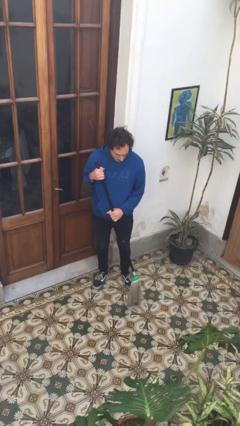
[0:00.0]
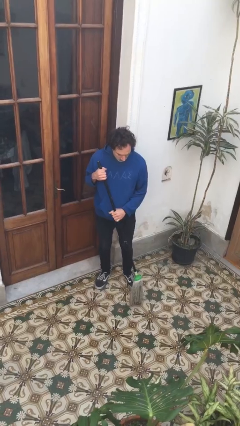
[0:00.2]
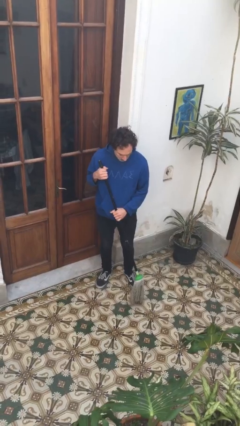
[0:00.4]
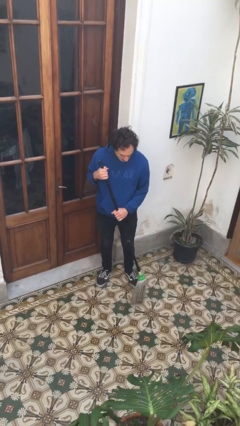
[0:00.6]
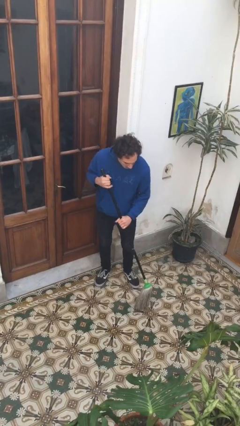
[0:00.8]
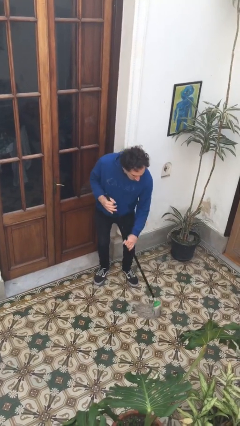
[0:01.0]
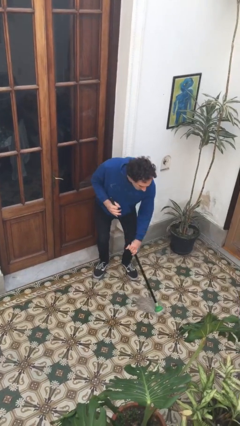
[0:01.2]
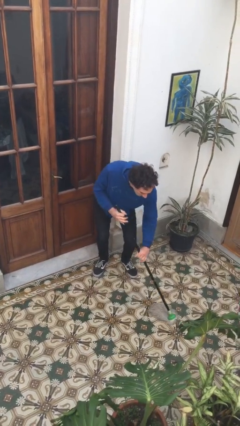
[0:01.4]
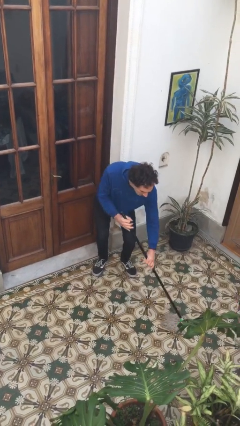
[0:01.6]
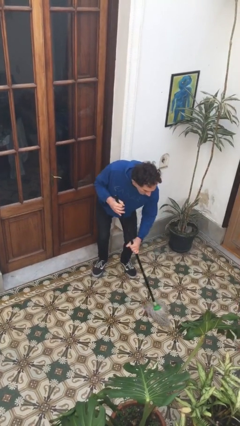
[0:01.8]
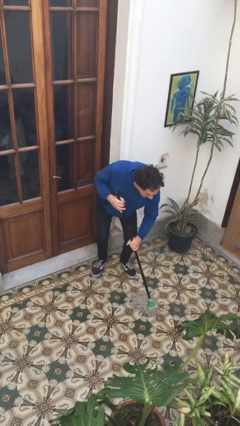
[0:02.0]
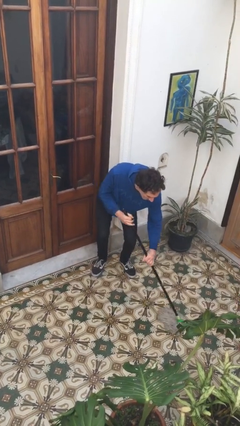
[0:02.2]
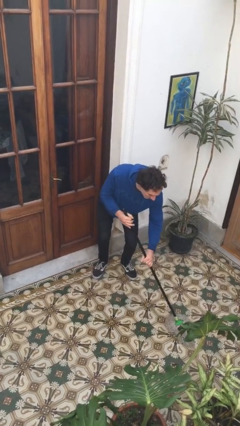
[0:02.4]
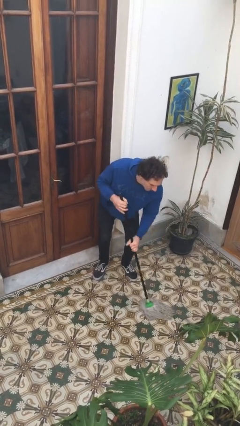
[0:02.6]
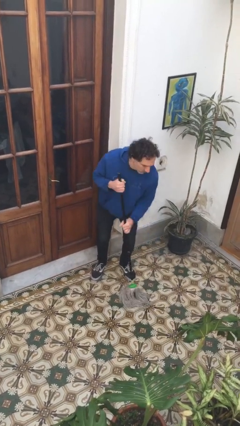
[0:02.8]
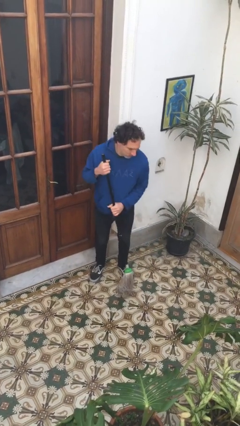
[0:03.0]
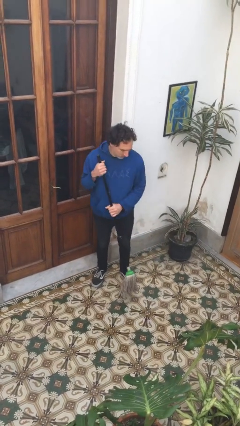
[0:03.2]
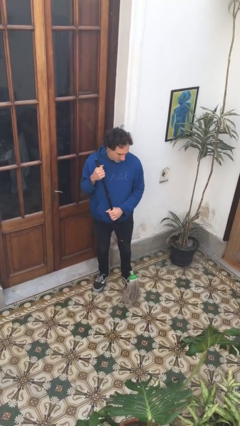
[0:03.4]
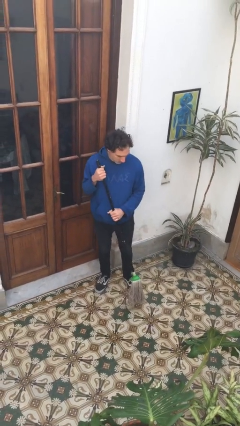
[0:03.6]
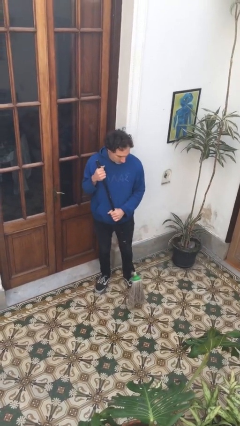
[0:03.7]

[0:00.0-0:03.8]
person mops

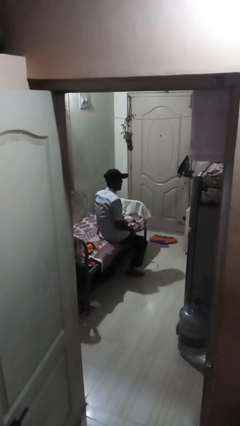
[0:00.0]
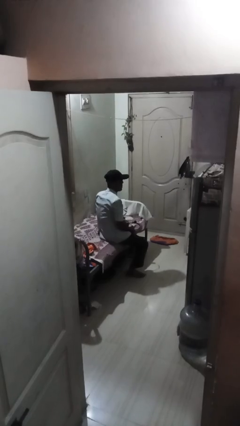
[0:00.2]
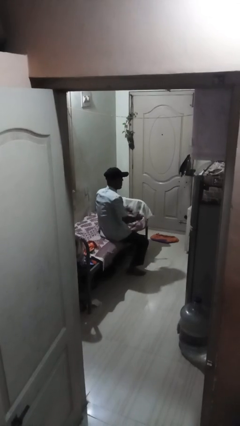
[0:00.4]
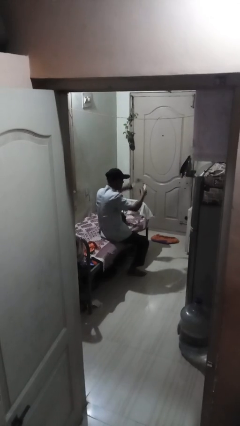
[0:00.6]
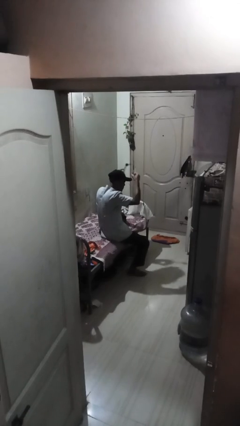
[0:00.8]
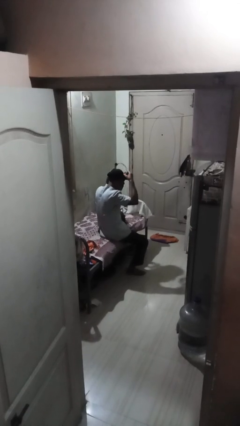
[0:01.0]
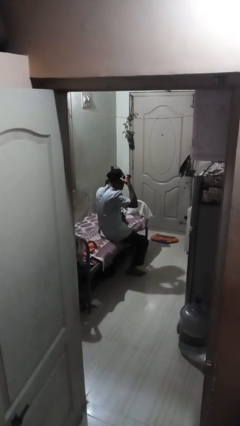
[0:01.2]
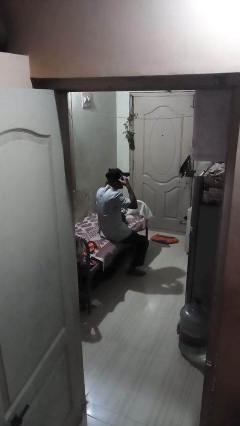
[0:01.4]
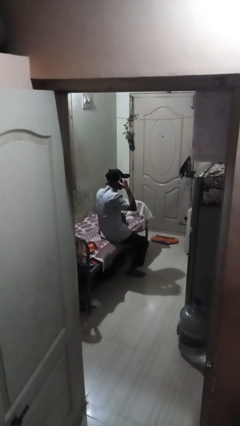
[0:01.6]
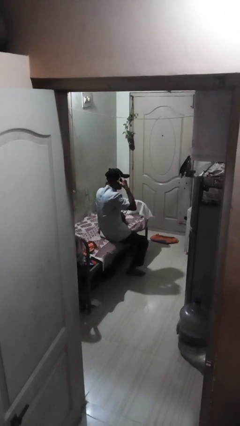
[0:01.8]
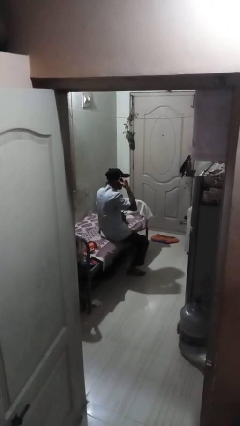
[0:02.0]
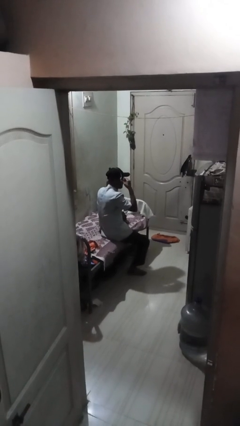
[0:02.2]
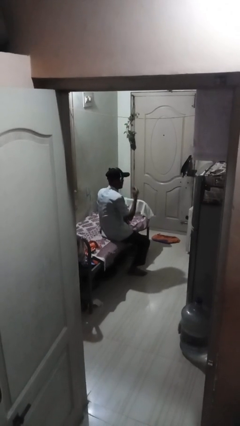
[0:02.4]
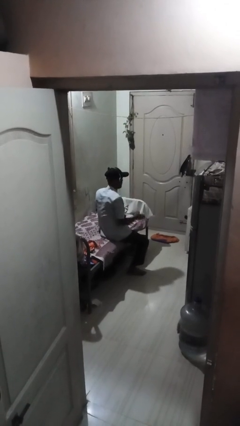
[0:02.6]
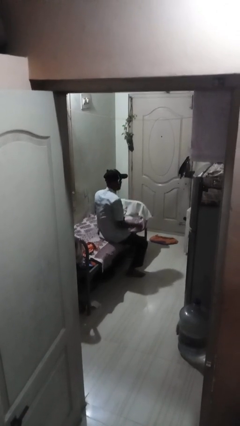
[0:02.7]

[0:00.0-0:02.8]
person puts on headphones

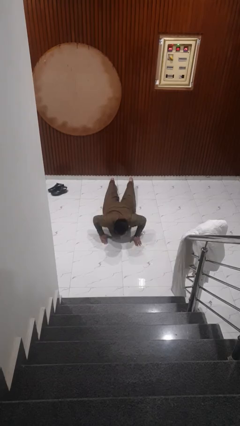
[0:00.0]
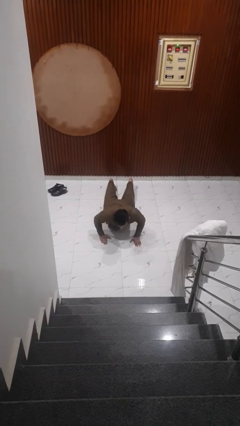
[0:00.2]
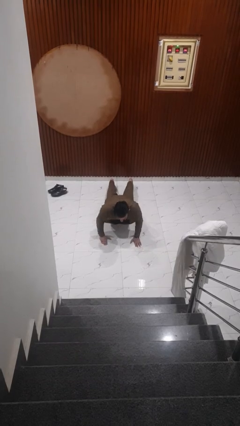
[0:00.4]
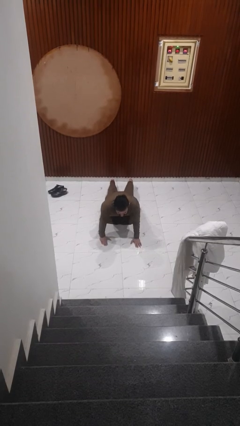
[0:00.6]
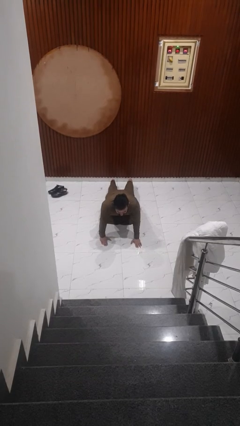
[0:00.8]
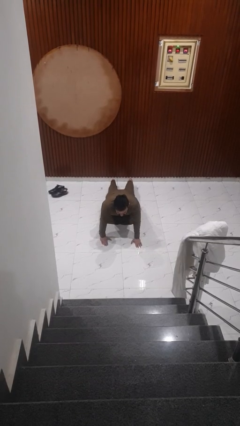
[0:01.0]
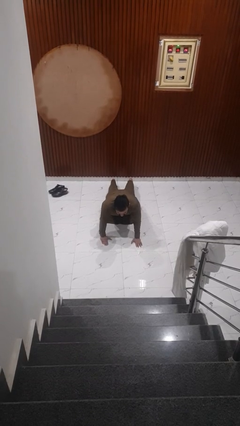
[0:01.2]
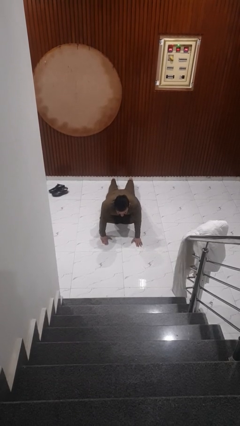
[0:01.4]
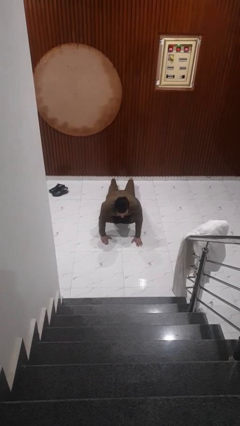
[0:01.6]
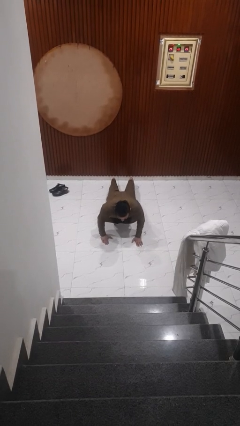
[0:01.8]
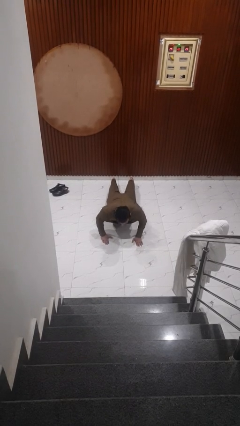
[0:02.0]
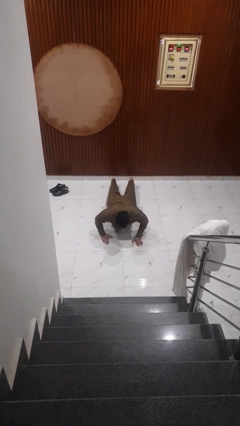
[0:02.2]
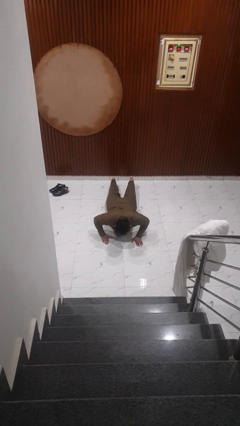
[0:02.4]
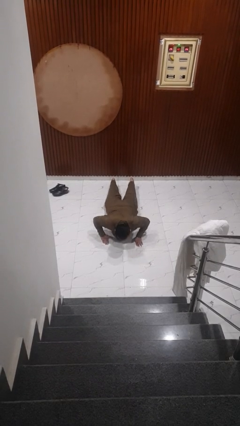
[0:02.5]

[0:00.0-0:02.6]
person exercises with pushup

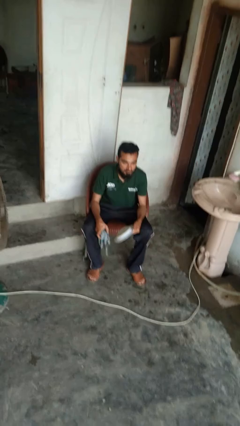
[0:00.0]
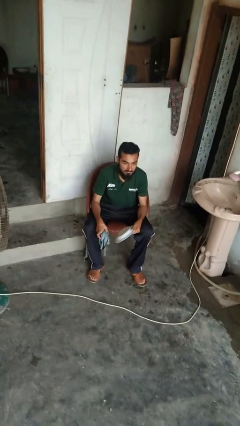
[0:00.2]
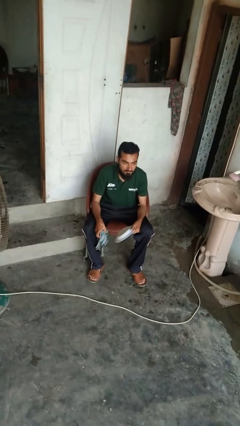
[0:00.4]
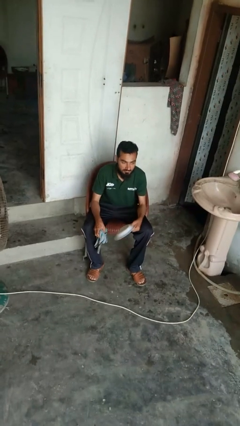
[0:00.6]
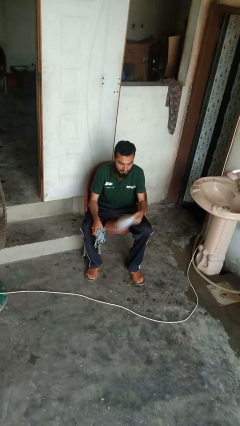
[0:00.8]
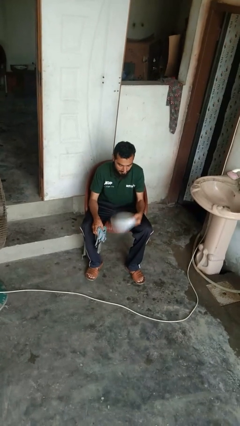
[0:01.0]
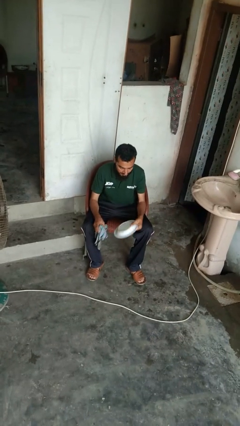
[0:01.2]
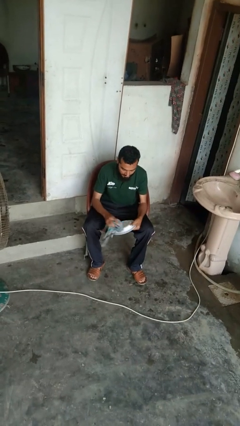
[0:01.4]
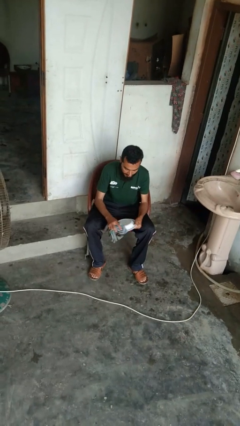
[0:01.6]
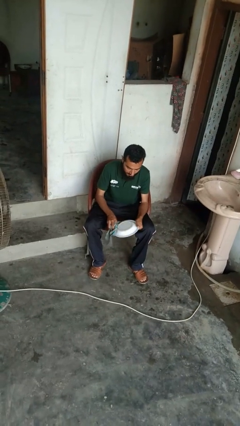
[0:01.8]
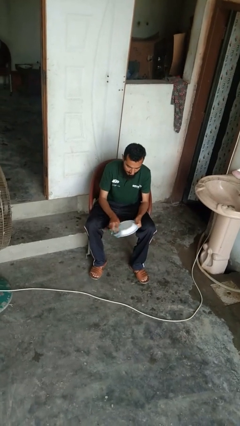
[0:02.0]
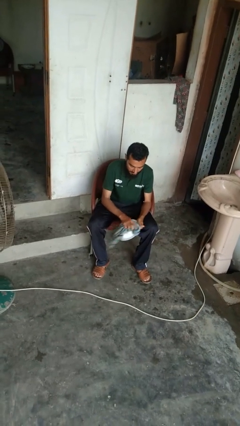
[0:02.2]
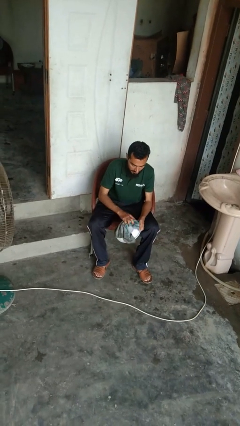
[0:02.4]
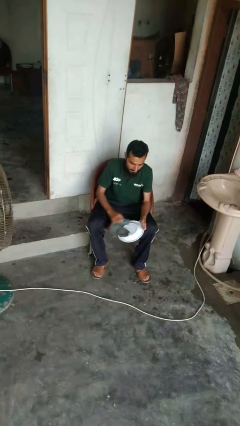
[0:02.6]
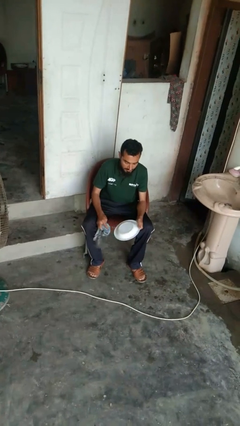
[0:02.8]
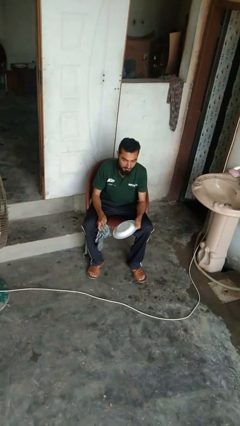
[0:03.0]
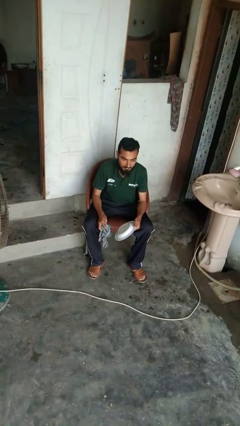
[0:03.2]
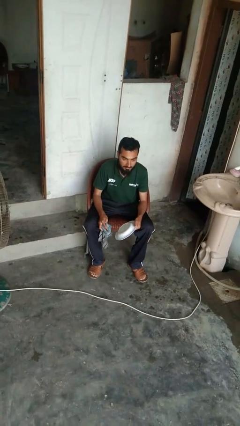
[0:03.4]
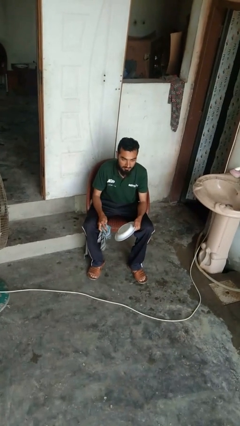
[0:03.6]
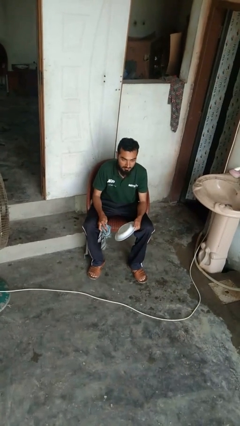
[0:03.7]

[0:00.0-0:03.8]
person dries dish

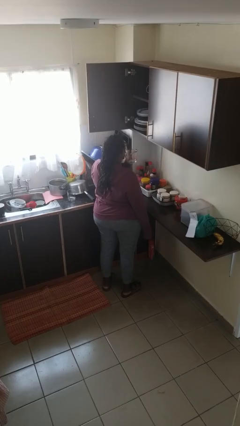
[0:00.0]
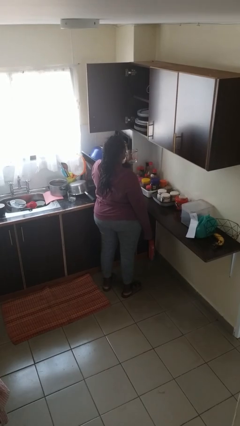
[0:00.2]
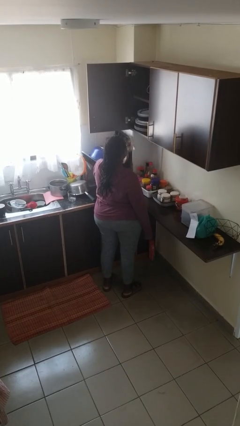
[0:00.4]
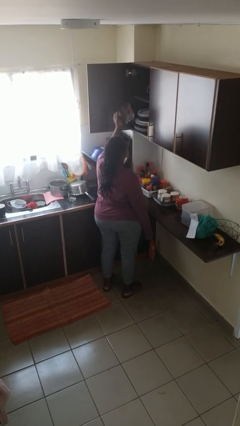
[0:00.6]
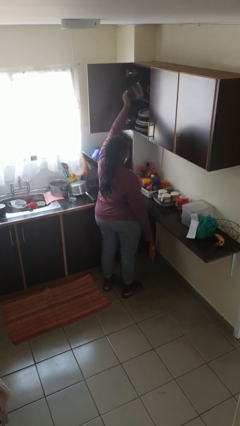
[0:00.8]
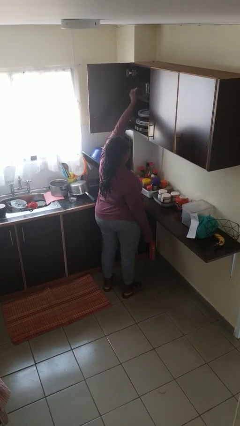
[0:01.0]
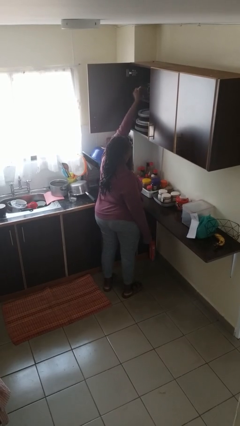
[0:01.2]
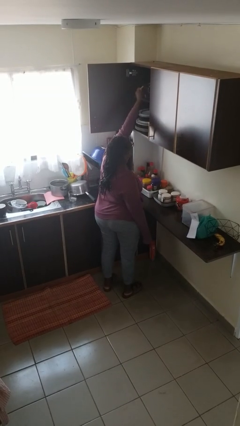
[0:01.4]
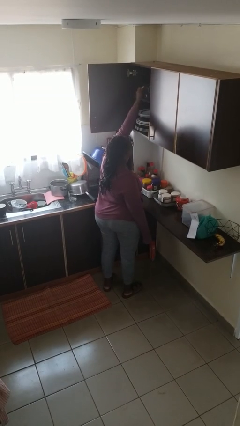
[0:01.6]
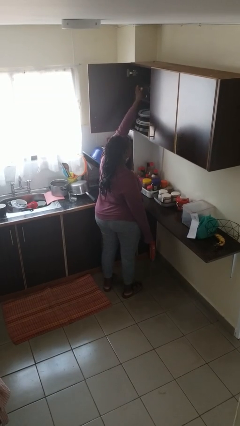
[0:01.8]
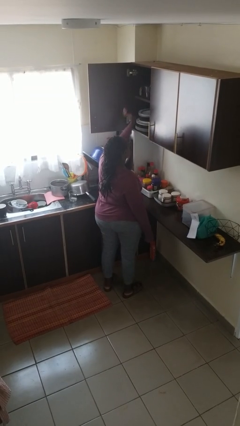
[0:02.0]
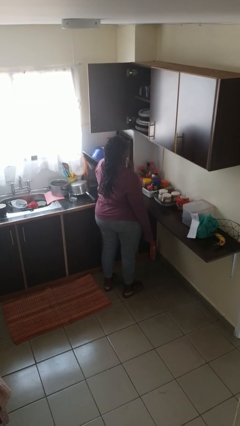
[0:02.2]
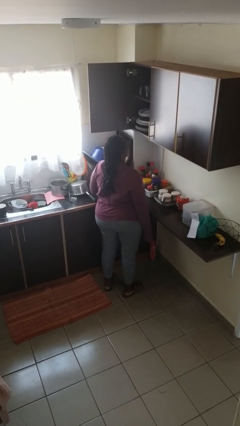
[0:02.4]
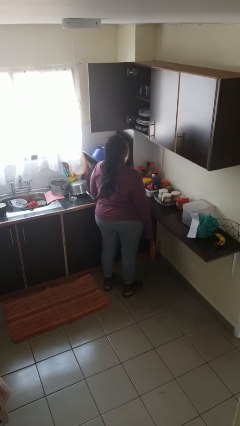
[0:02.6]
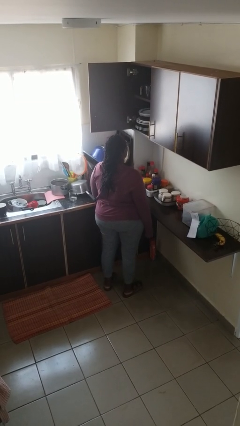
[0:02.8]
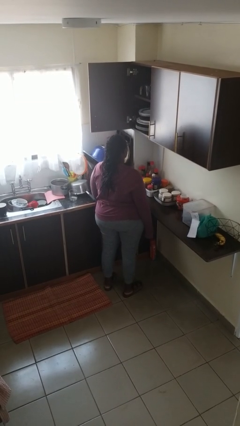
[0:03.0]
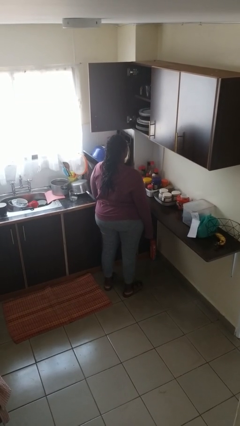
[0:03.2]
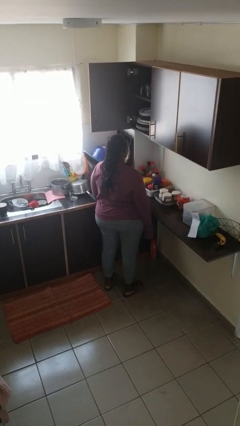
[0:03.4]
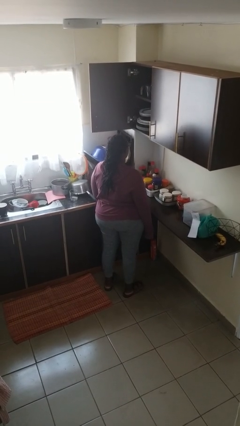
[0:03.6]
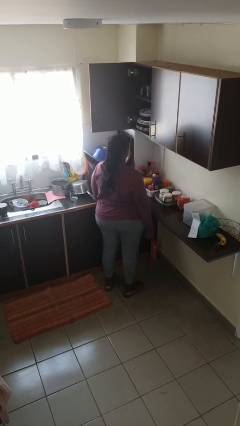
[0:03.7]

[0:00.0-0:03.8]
person puts down object into cabinet

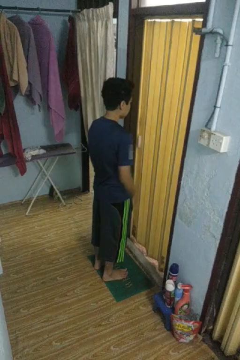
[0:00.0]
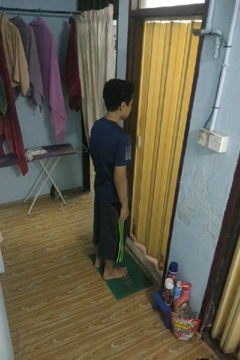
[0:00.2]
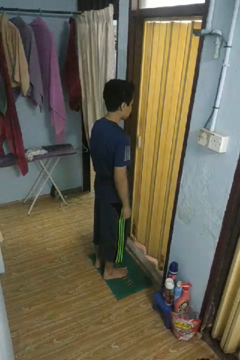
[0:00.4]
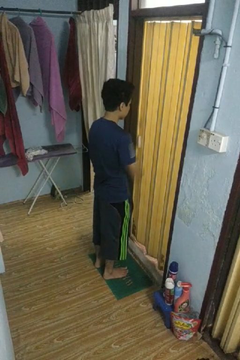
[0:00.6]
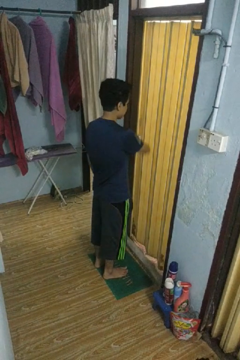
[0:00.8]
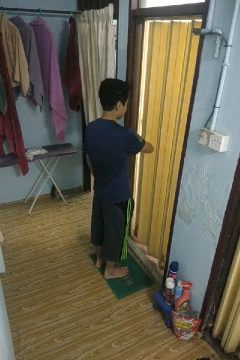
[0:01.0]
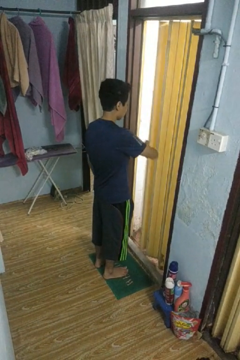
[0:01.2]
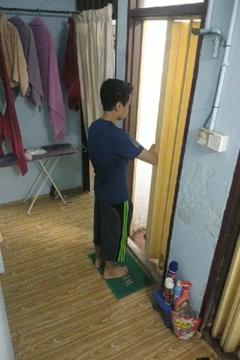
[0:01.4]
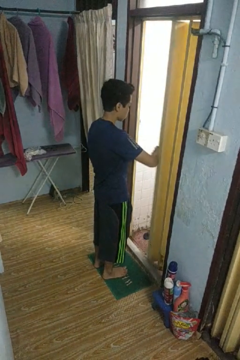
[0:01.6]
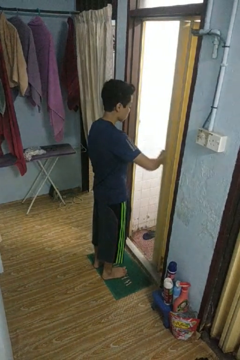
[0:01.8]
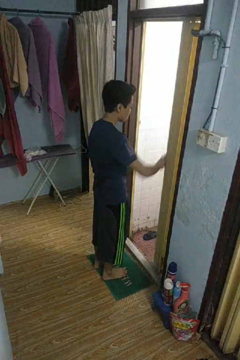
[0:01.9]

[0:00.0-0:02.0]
person opens sliding door
